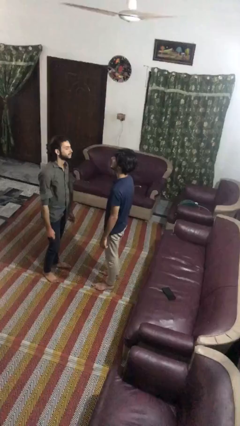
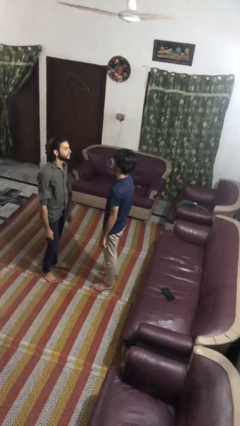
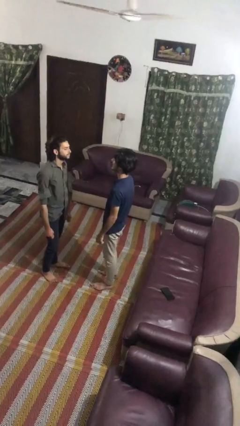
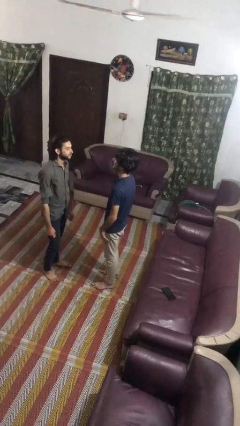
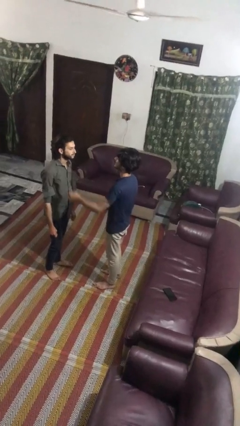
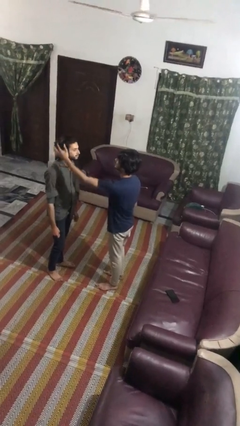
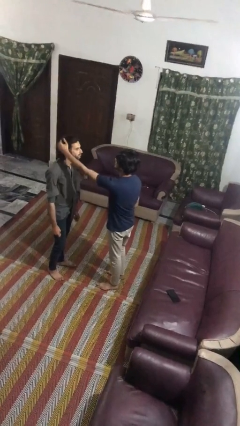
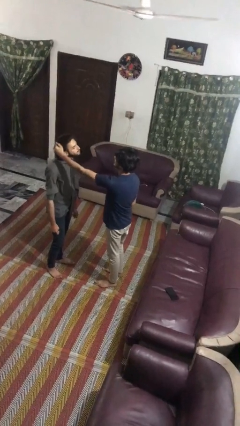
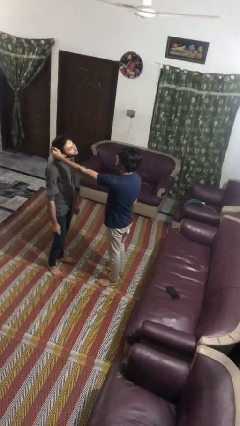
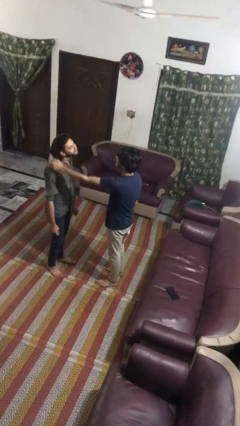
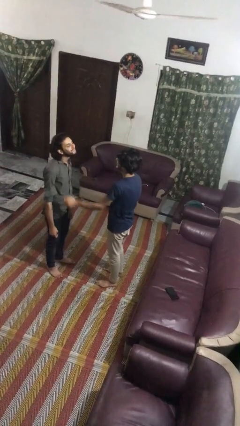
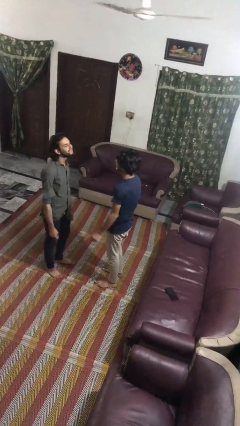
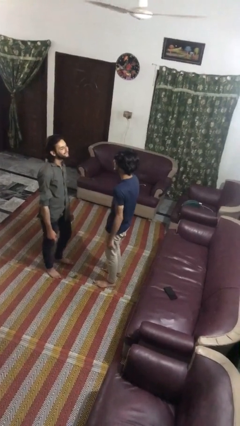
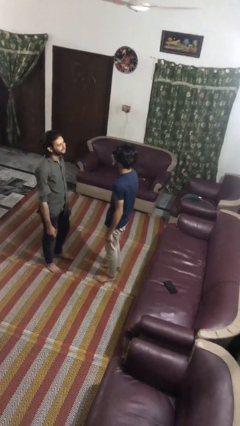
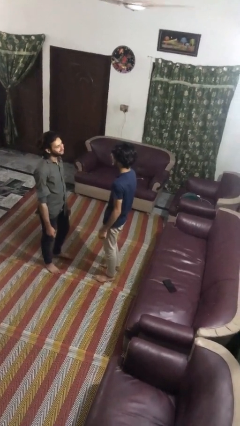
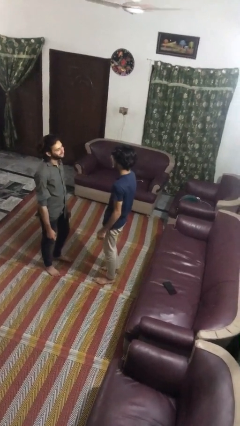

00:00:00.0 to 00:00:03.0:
person grabs person by hair

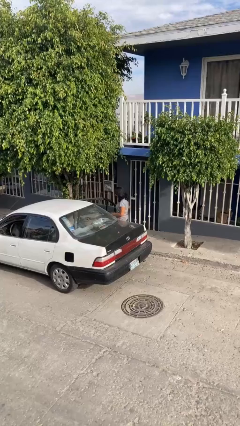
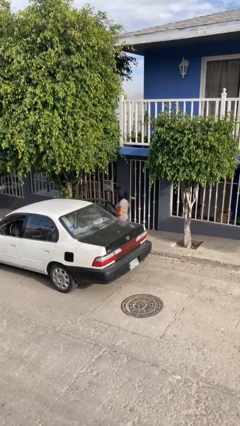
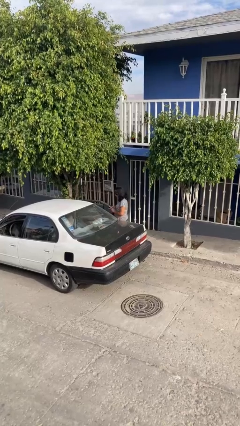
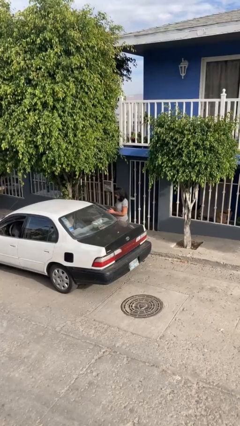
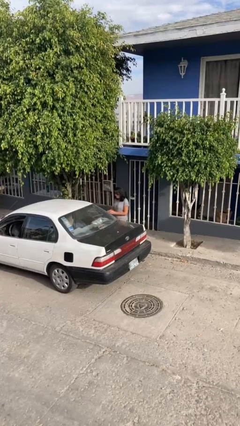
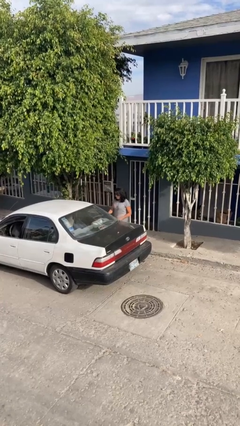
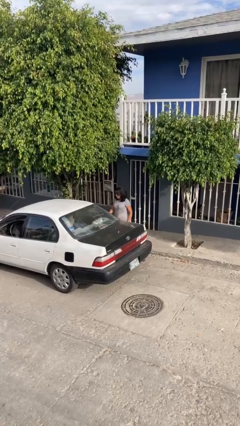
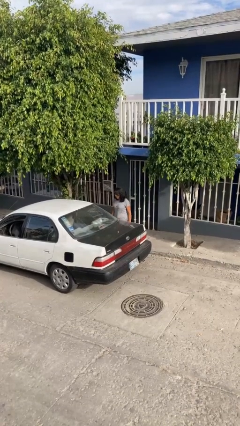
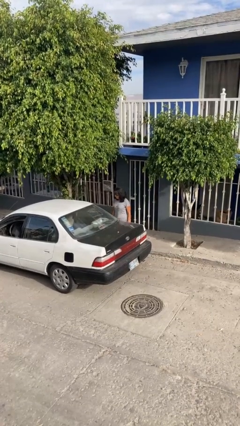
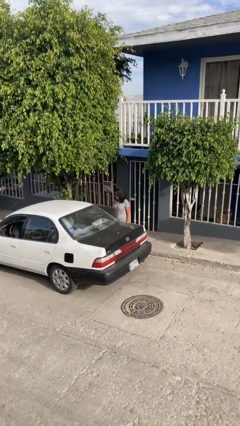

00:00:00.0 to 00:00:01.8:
person closes car door

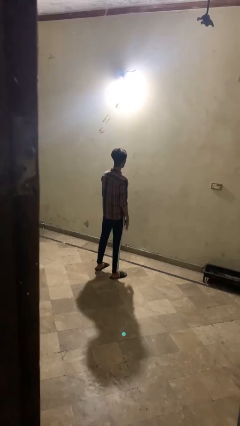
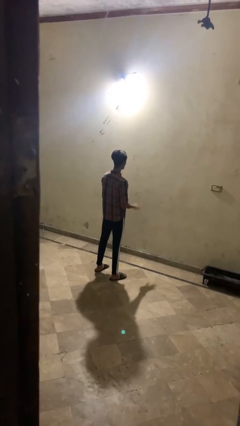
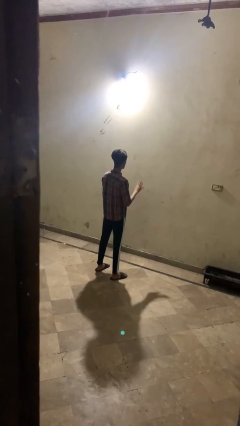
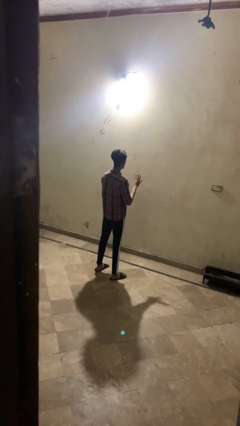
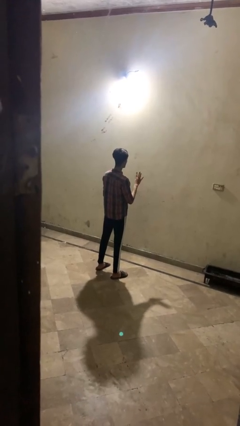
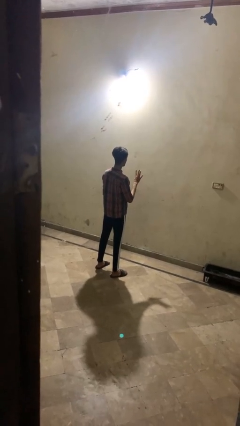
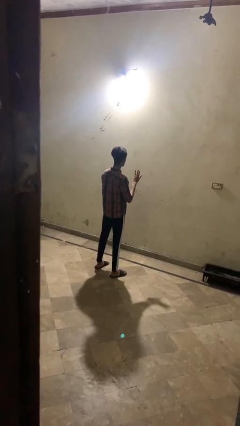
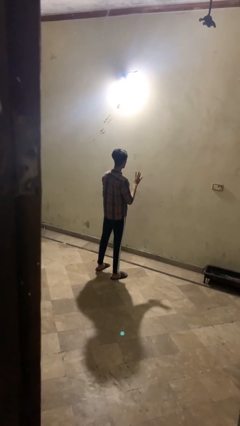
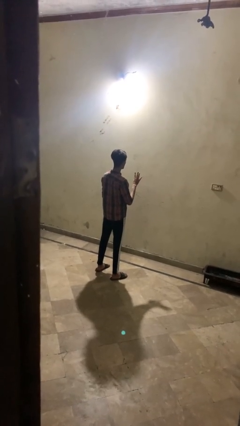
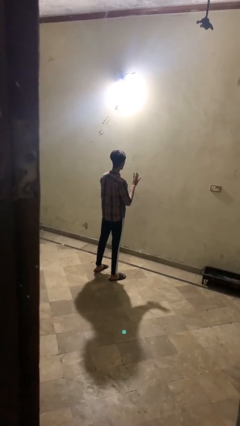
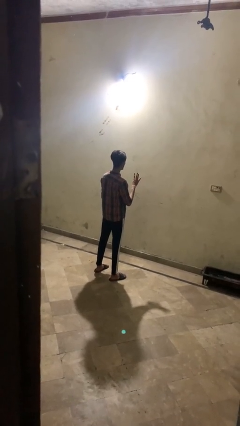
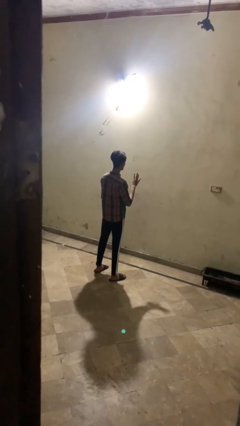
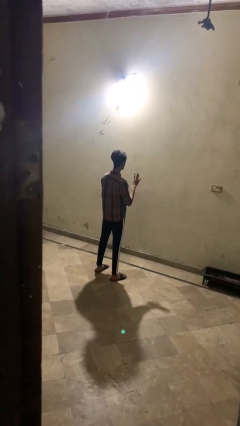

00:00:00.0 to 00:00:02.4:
person gestures number four

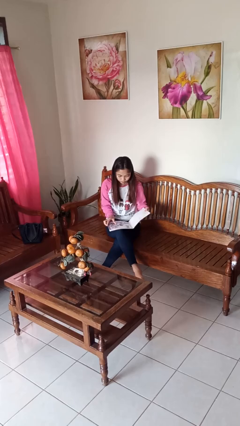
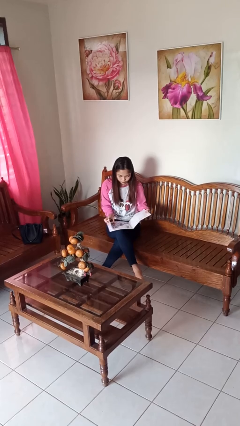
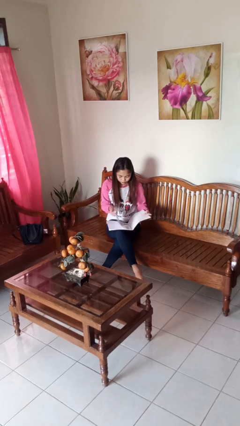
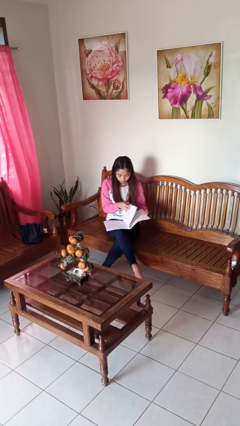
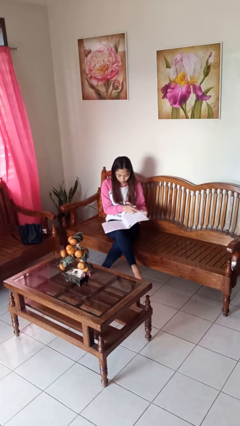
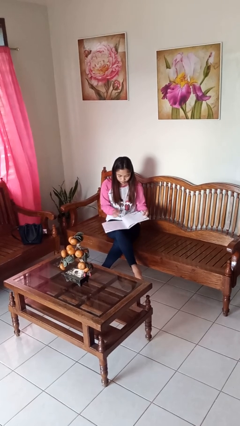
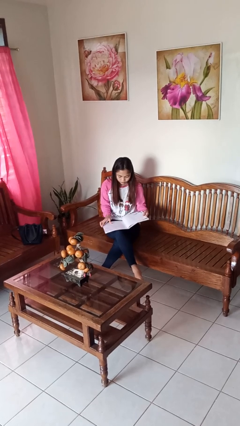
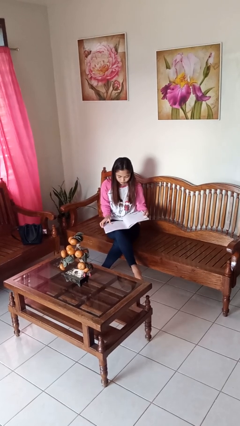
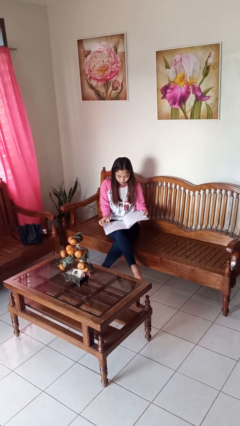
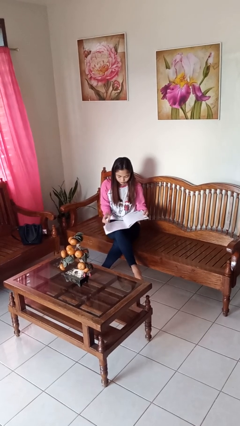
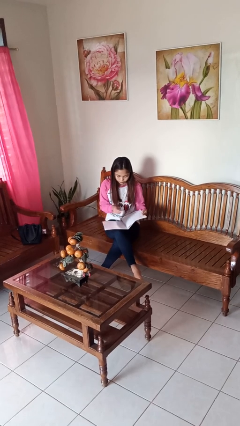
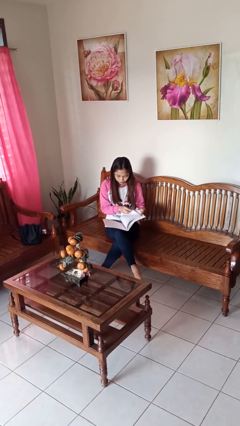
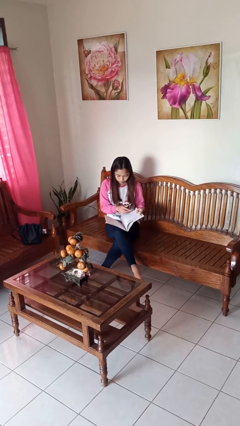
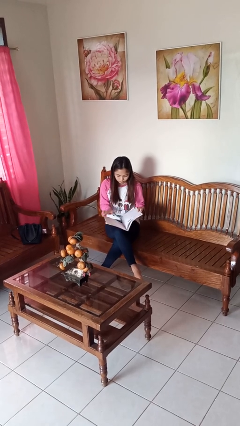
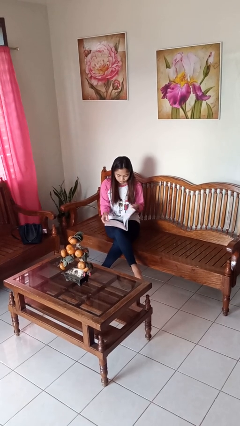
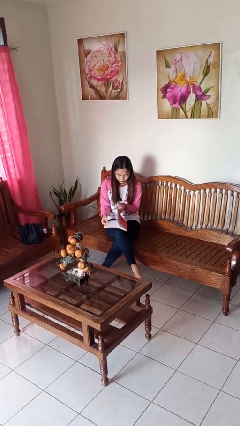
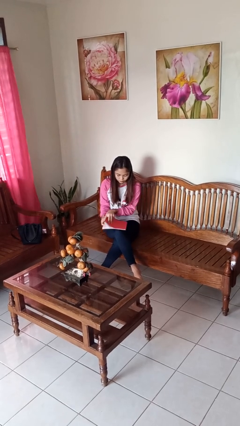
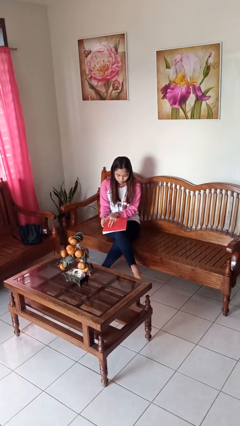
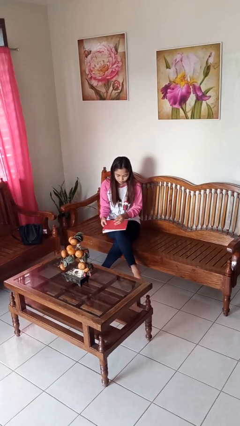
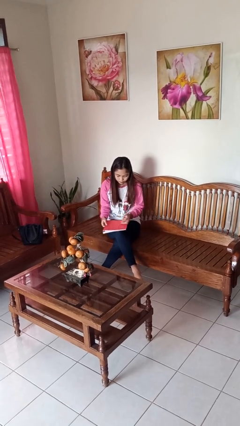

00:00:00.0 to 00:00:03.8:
person reads magazine

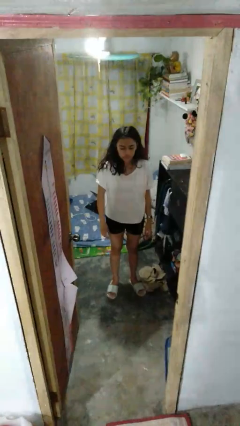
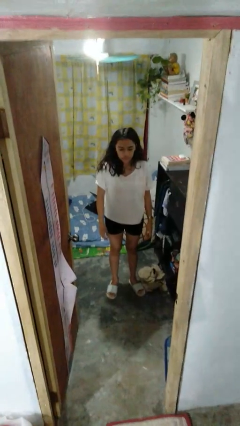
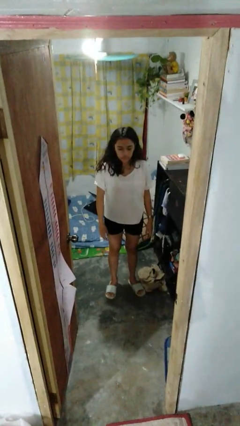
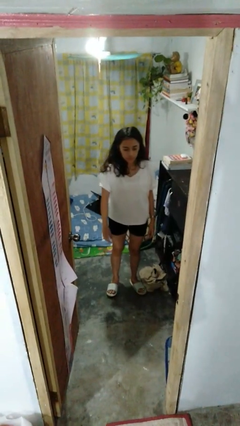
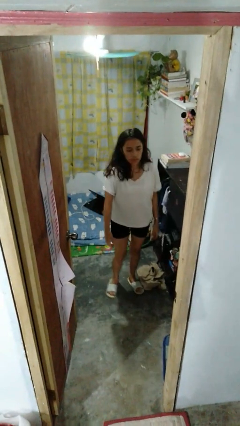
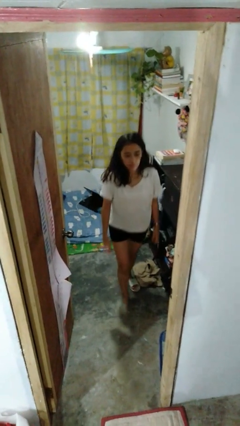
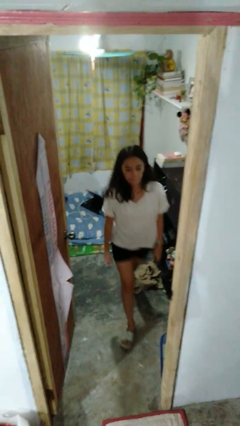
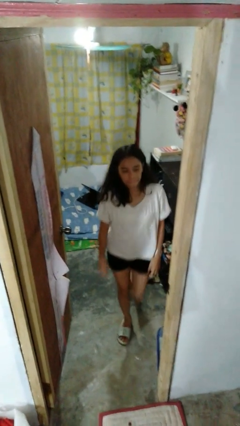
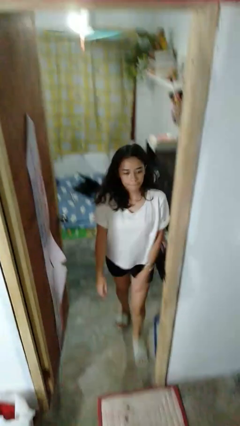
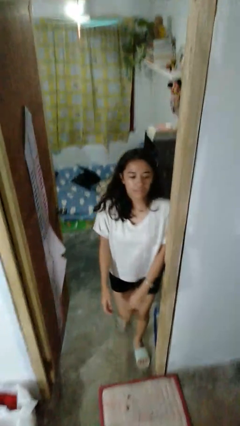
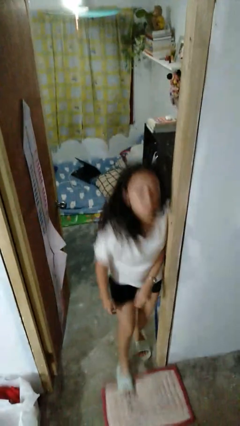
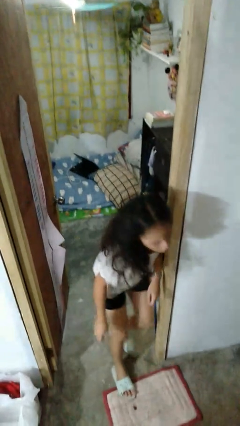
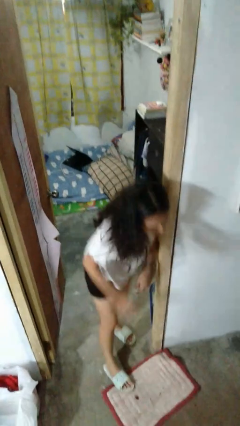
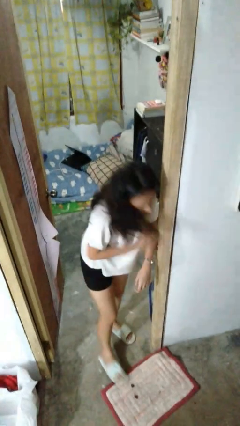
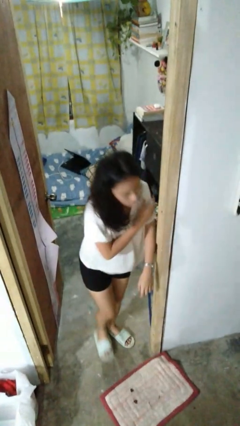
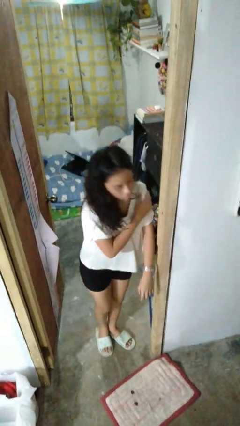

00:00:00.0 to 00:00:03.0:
person bumps into wall

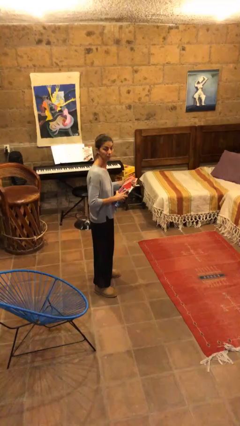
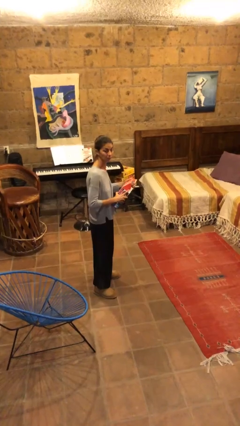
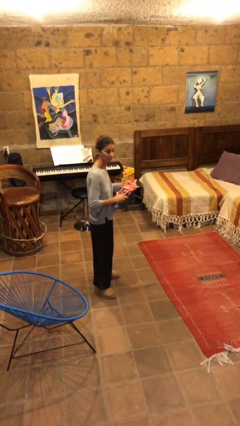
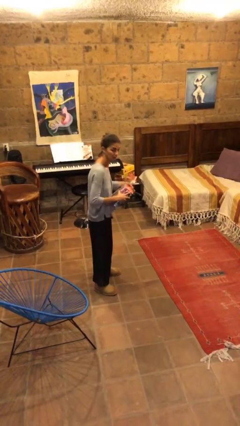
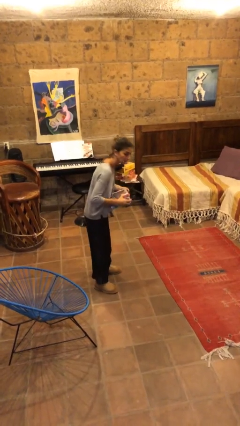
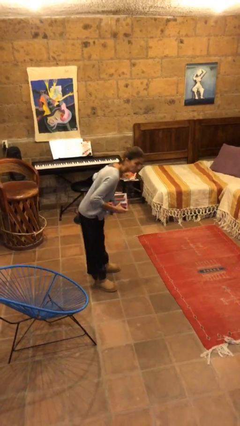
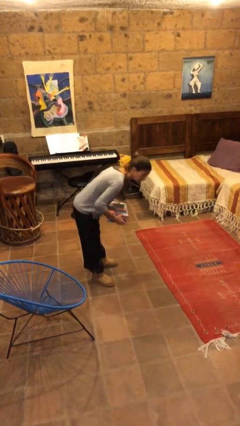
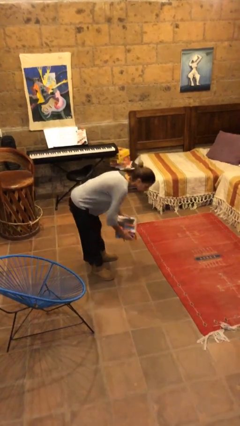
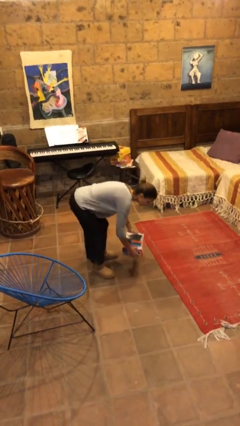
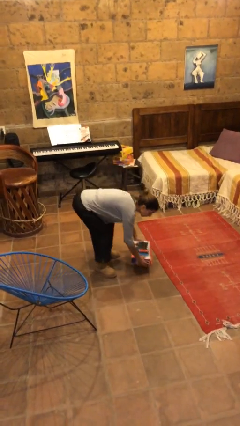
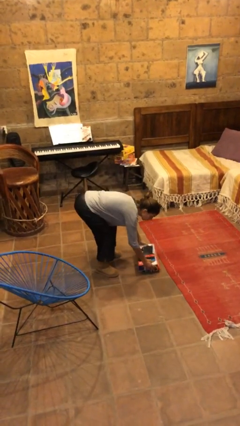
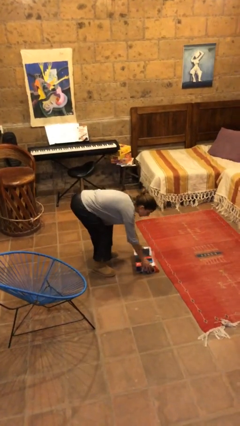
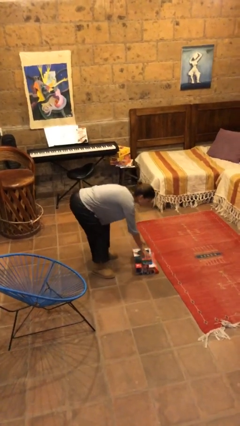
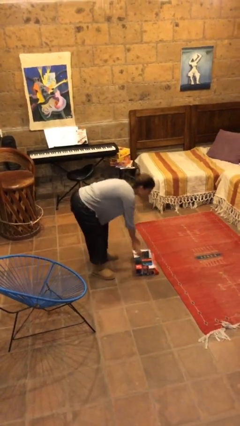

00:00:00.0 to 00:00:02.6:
person puts down object on floor

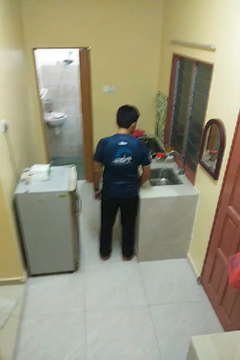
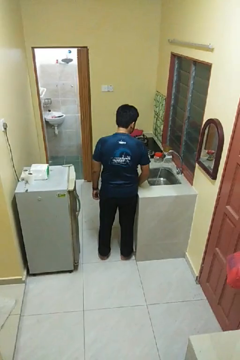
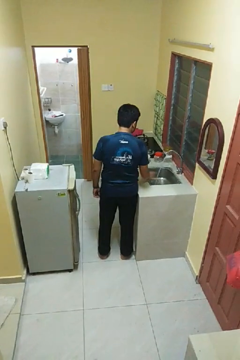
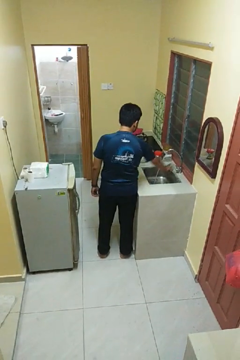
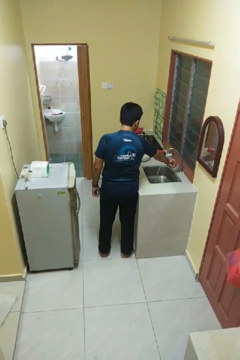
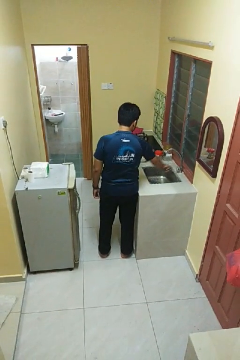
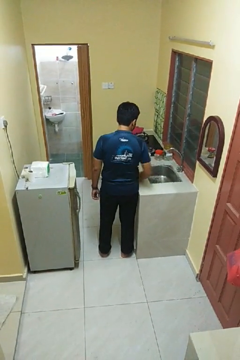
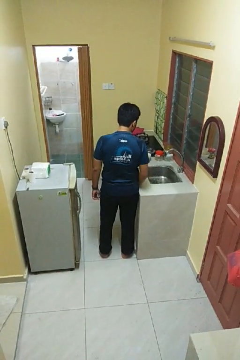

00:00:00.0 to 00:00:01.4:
person turns off faucet
